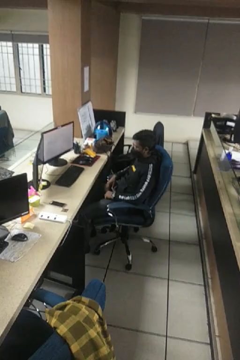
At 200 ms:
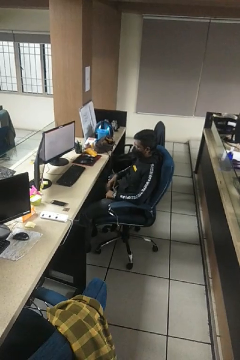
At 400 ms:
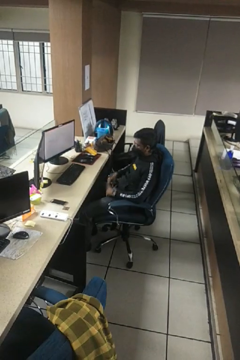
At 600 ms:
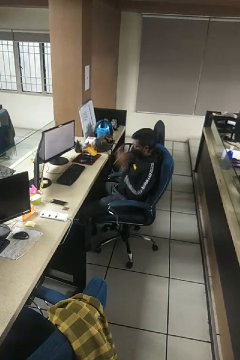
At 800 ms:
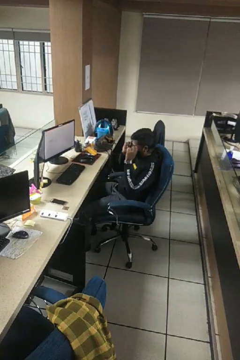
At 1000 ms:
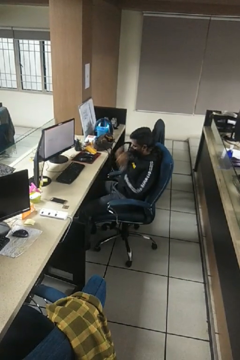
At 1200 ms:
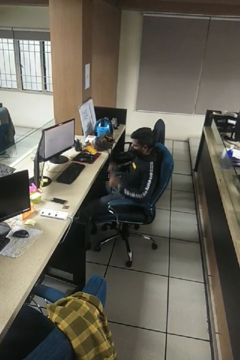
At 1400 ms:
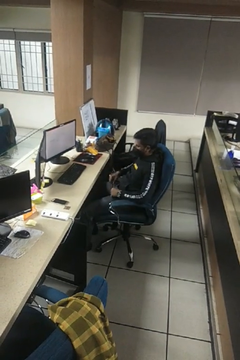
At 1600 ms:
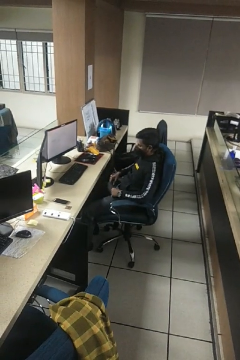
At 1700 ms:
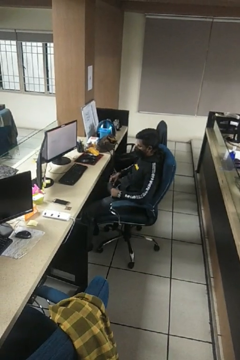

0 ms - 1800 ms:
person takes off glasses

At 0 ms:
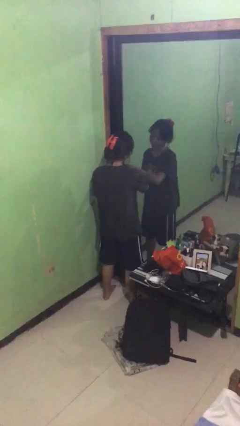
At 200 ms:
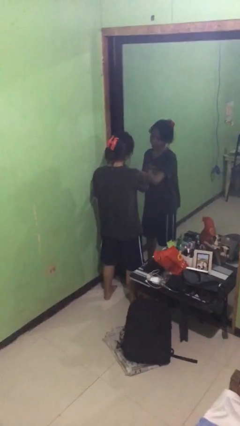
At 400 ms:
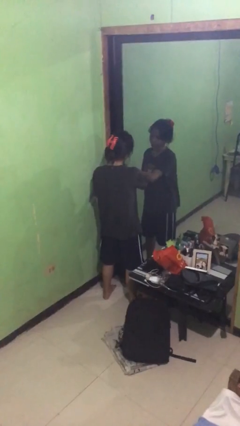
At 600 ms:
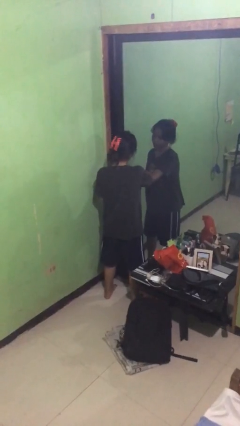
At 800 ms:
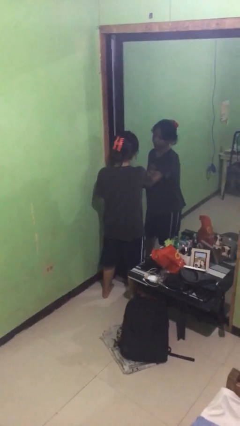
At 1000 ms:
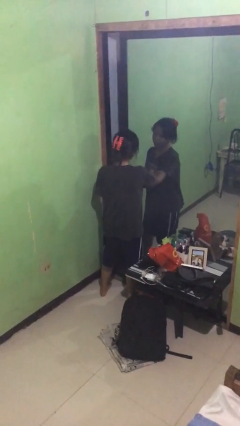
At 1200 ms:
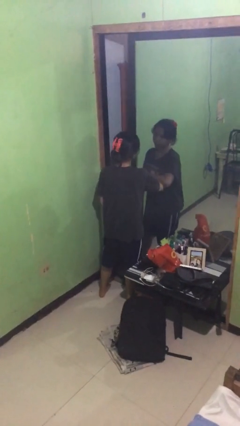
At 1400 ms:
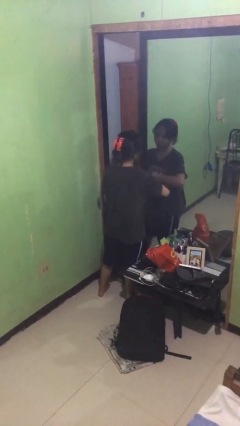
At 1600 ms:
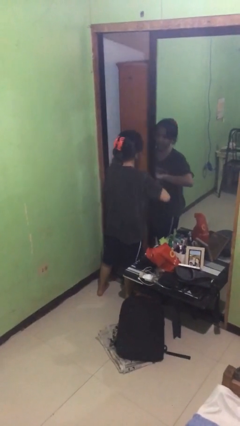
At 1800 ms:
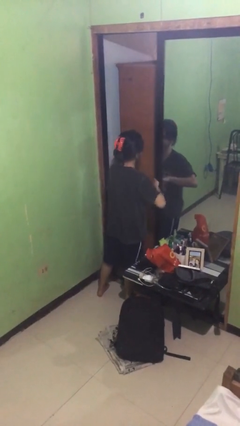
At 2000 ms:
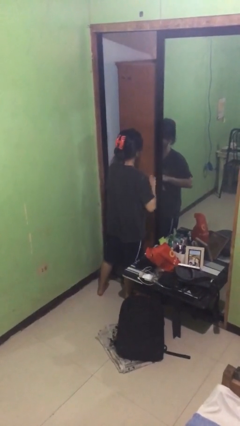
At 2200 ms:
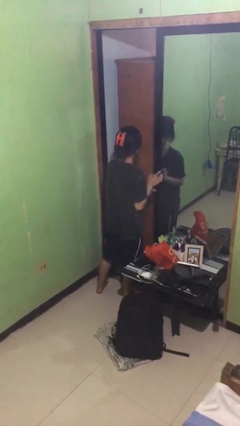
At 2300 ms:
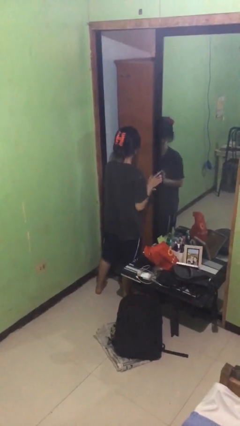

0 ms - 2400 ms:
person opens sliding door

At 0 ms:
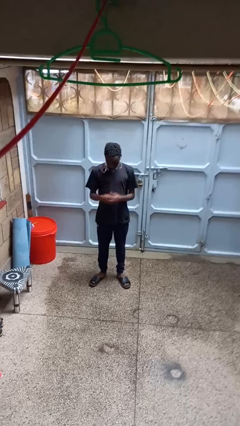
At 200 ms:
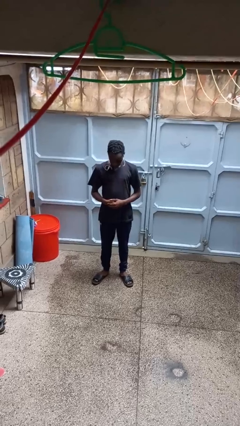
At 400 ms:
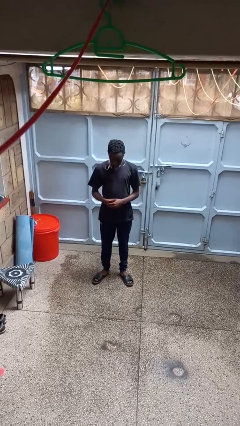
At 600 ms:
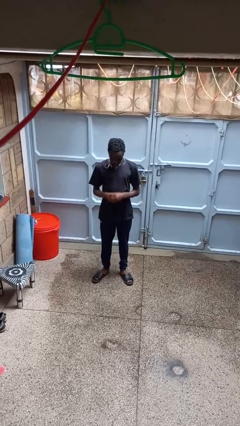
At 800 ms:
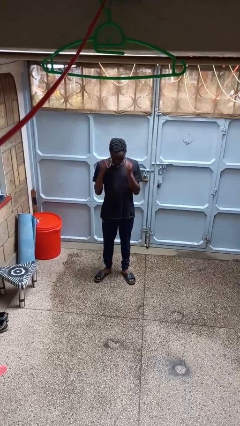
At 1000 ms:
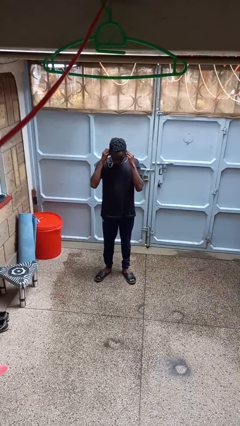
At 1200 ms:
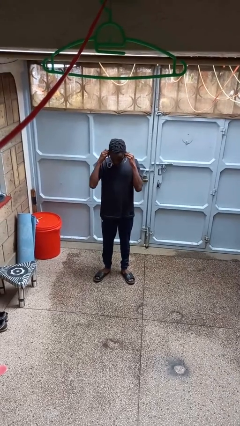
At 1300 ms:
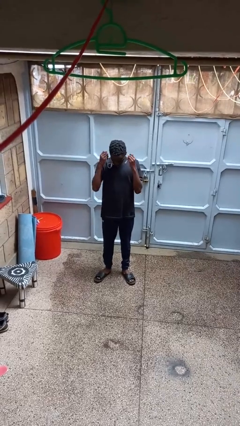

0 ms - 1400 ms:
person takes off headphones

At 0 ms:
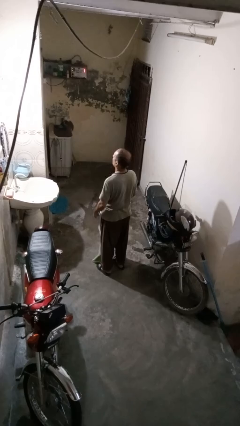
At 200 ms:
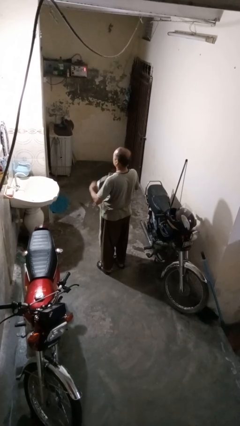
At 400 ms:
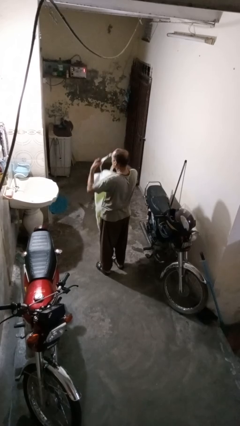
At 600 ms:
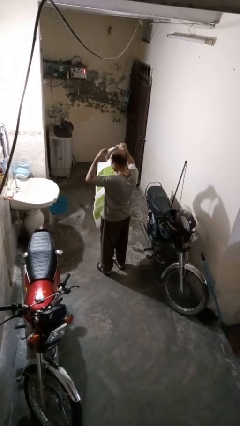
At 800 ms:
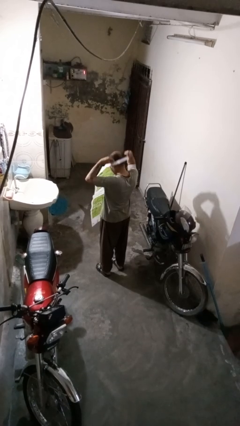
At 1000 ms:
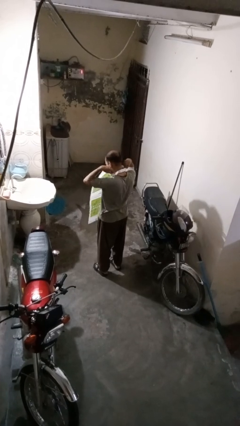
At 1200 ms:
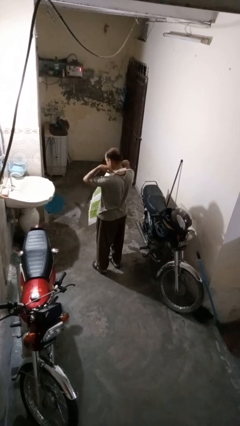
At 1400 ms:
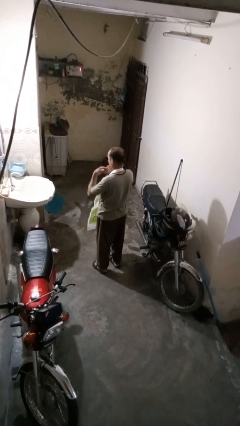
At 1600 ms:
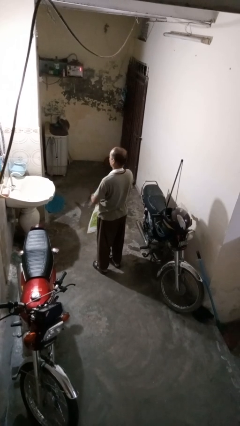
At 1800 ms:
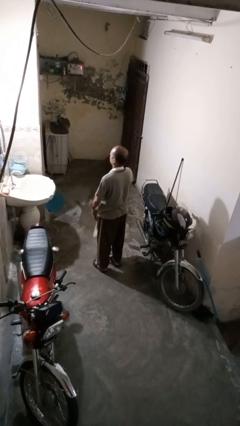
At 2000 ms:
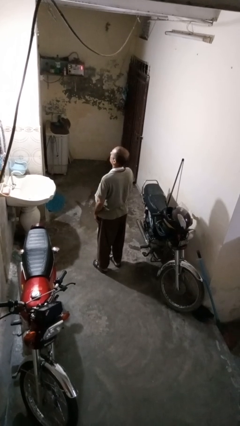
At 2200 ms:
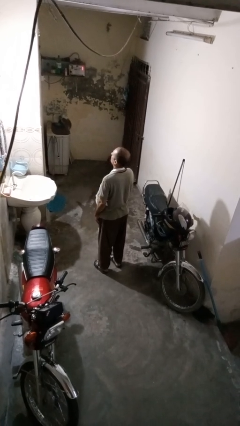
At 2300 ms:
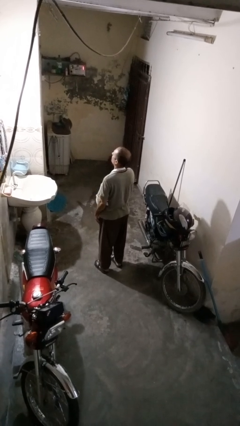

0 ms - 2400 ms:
person puts on apron

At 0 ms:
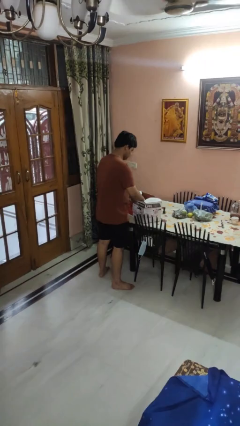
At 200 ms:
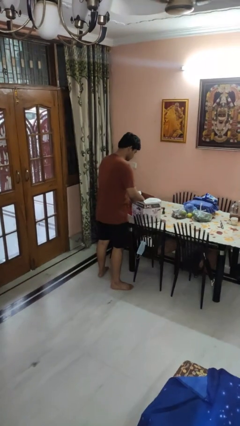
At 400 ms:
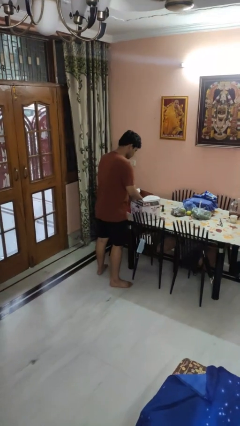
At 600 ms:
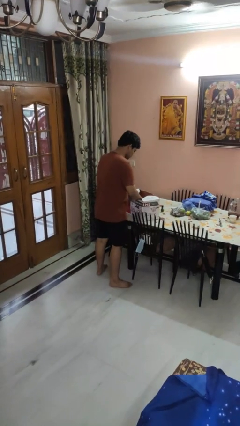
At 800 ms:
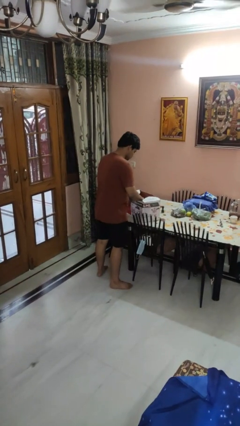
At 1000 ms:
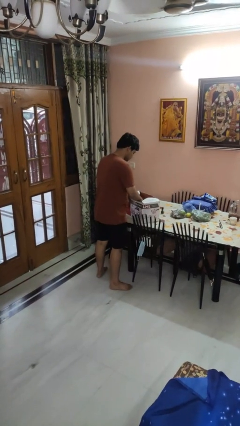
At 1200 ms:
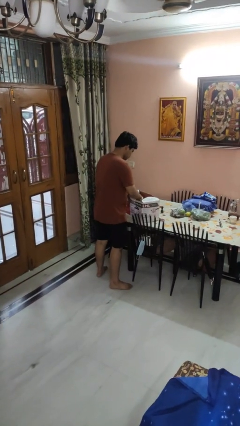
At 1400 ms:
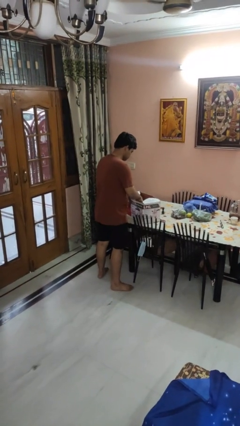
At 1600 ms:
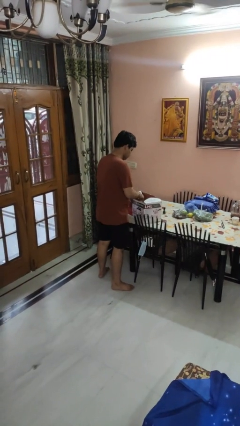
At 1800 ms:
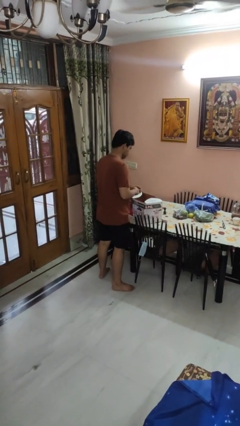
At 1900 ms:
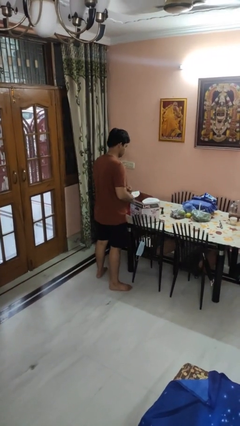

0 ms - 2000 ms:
person searches in box

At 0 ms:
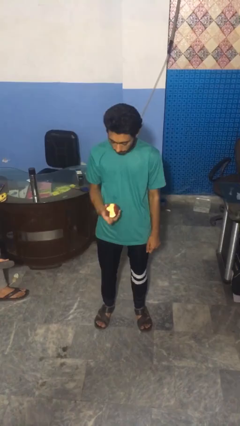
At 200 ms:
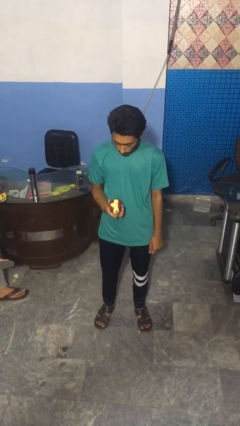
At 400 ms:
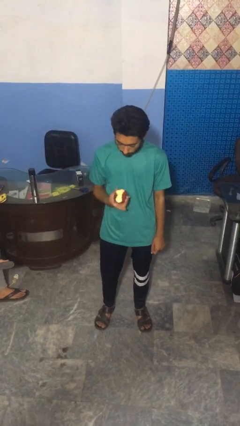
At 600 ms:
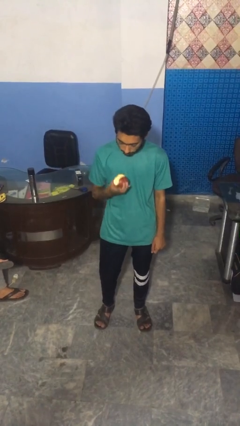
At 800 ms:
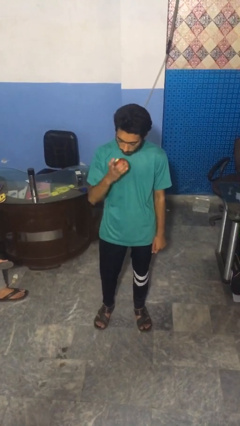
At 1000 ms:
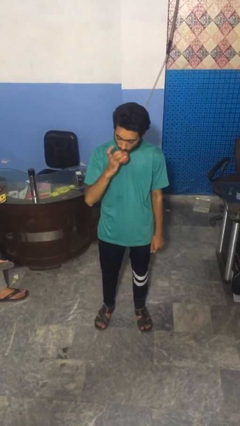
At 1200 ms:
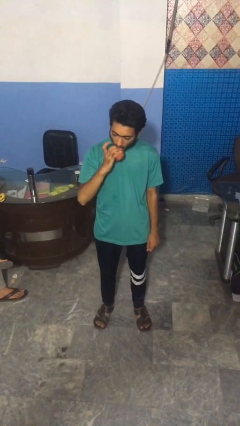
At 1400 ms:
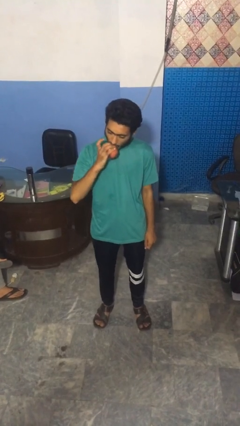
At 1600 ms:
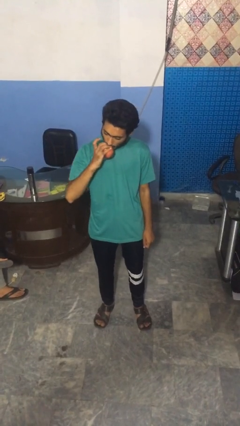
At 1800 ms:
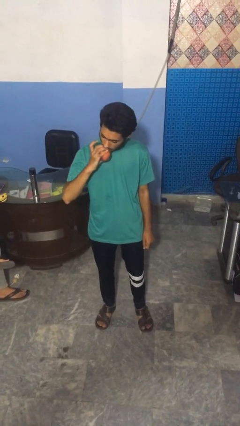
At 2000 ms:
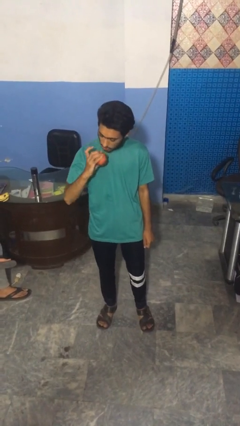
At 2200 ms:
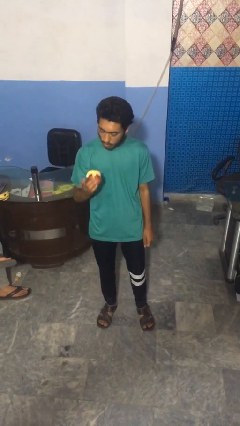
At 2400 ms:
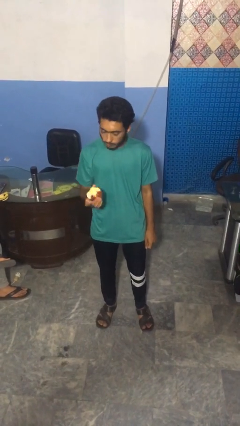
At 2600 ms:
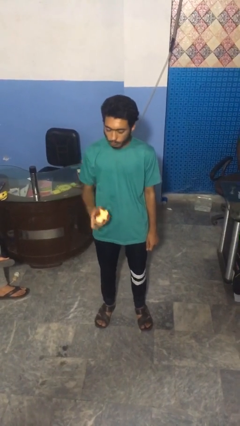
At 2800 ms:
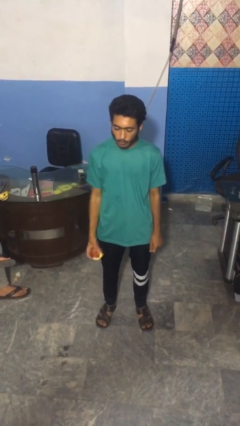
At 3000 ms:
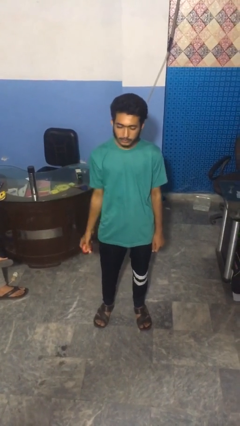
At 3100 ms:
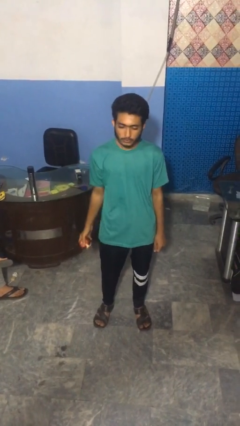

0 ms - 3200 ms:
person eats apple

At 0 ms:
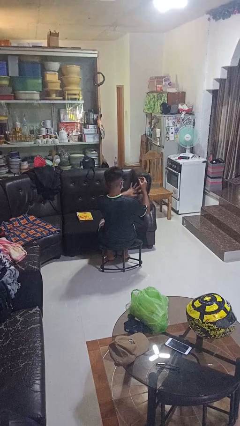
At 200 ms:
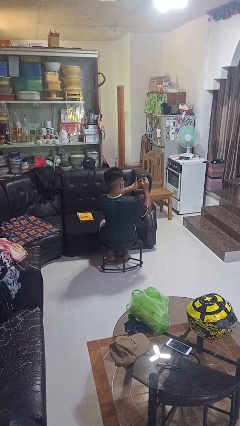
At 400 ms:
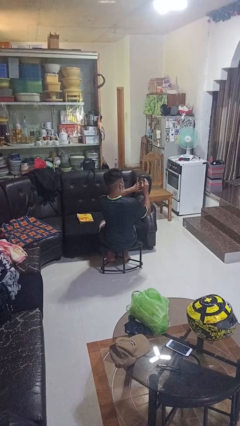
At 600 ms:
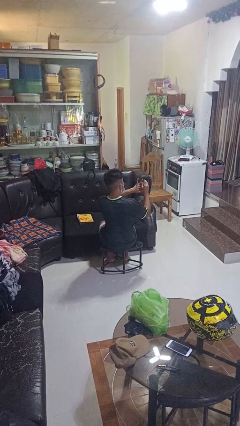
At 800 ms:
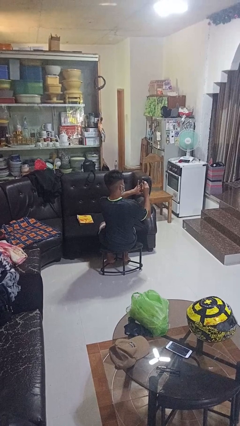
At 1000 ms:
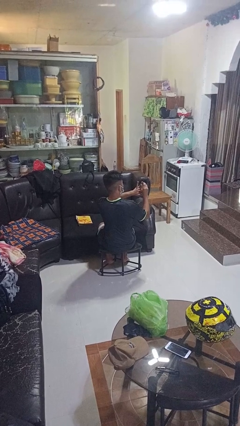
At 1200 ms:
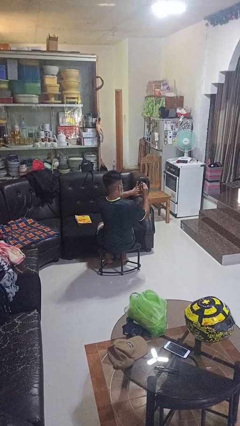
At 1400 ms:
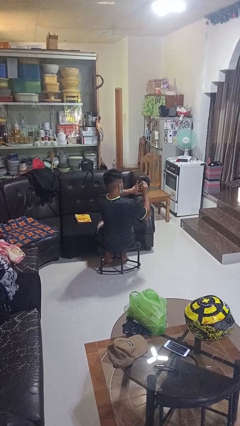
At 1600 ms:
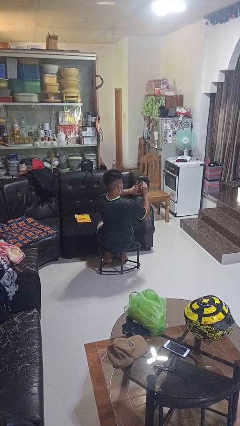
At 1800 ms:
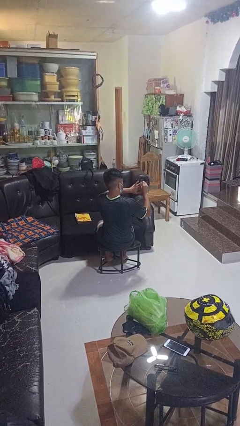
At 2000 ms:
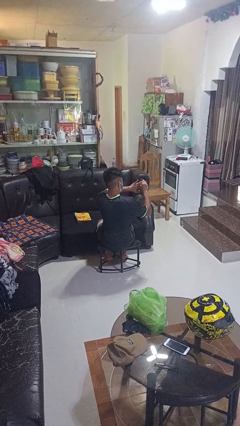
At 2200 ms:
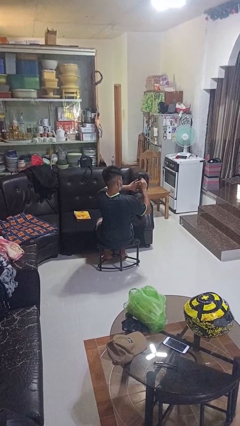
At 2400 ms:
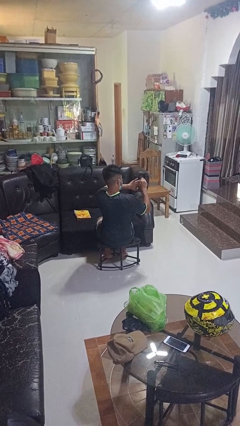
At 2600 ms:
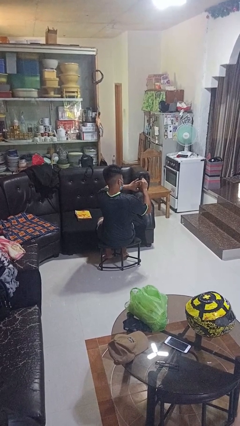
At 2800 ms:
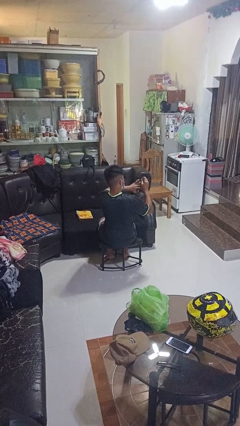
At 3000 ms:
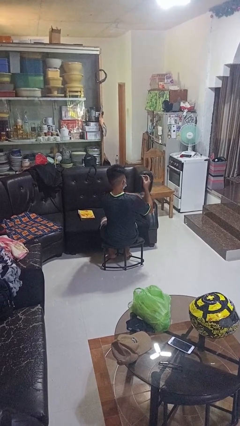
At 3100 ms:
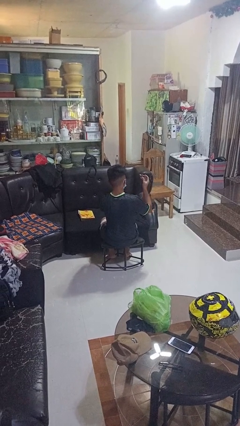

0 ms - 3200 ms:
person clips fingernails

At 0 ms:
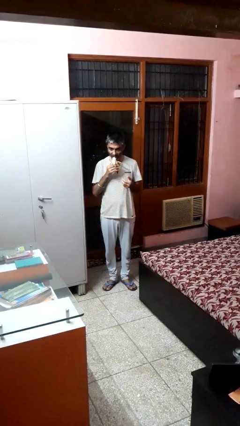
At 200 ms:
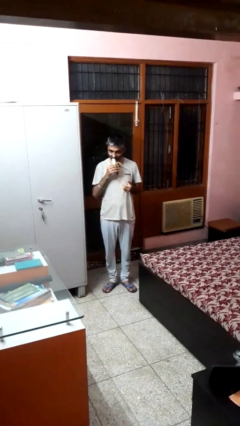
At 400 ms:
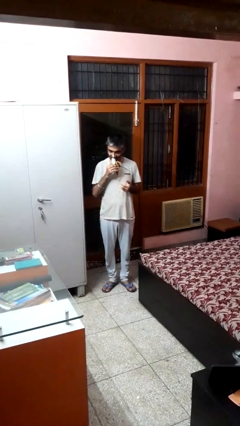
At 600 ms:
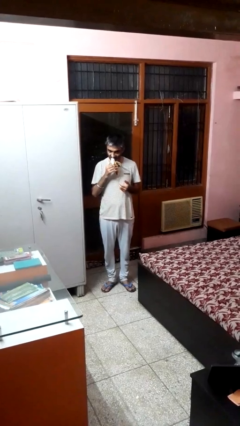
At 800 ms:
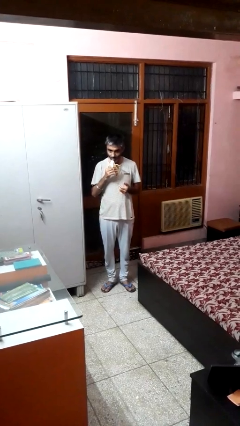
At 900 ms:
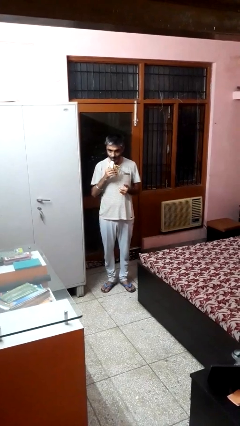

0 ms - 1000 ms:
person eats banana

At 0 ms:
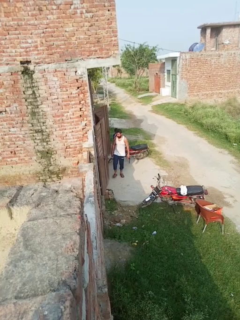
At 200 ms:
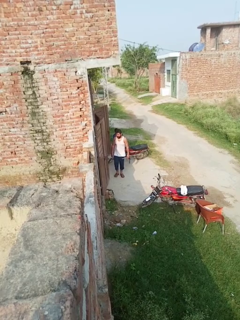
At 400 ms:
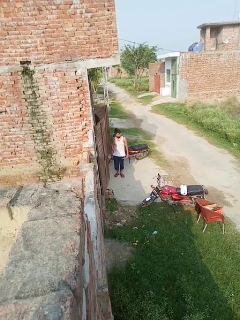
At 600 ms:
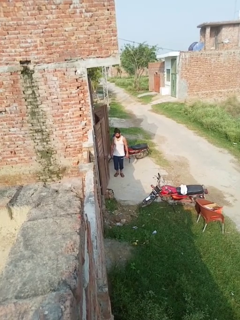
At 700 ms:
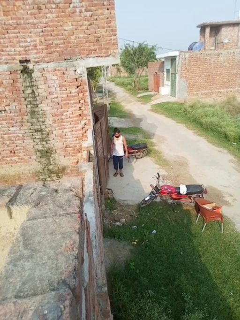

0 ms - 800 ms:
person closes door with foot
